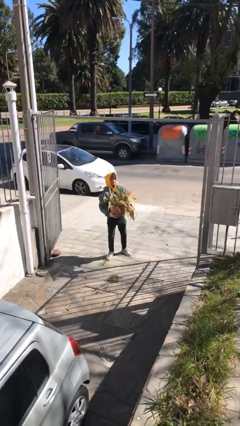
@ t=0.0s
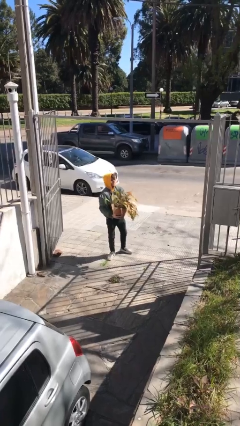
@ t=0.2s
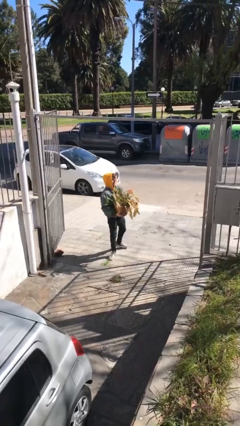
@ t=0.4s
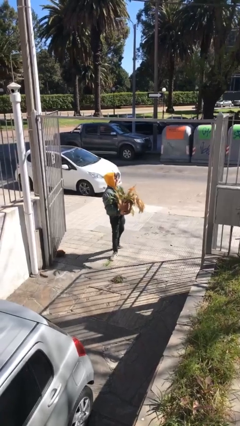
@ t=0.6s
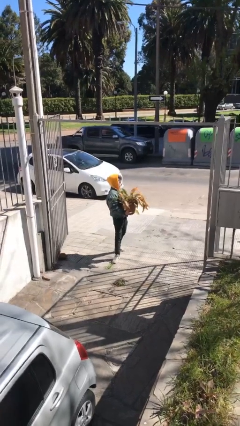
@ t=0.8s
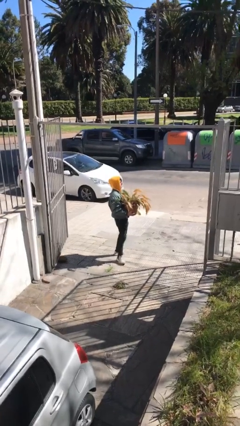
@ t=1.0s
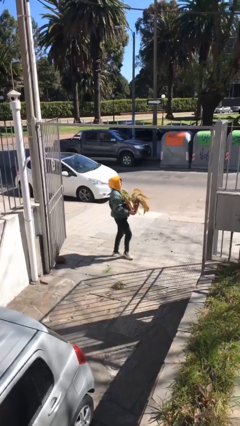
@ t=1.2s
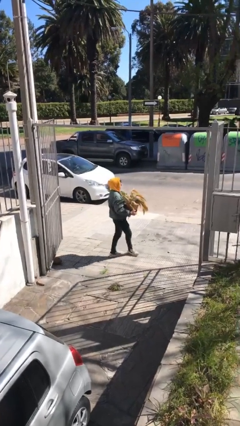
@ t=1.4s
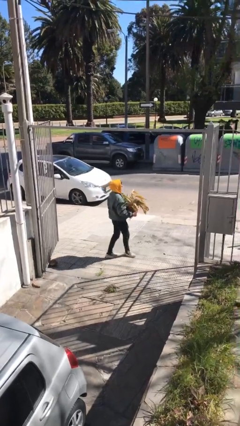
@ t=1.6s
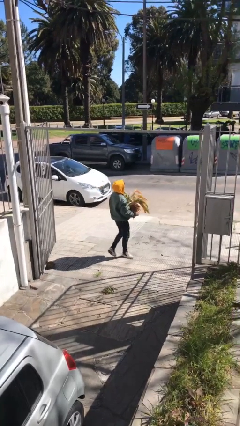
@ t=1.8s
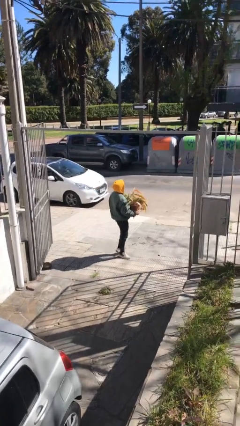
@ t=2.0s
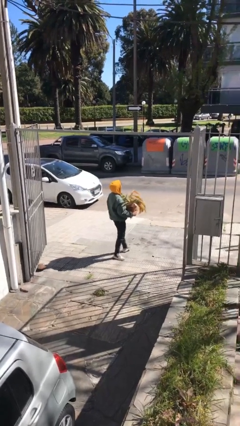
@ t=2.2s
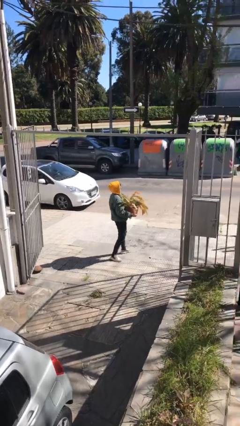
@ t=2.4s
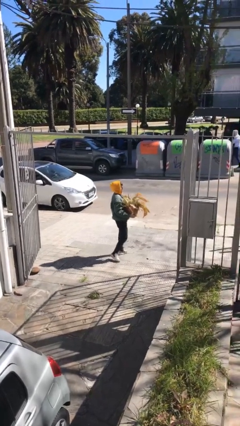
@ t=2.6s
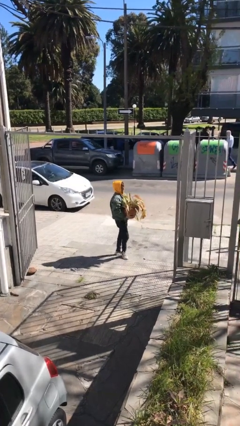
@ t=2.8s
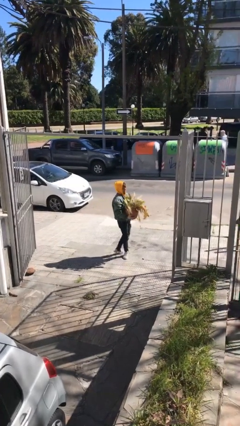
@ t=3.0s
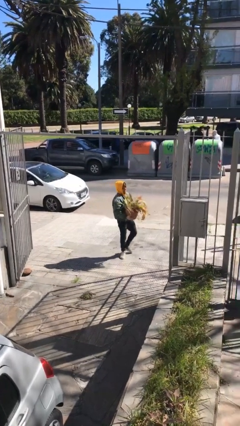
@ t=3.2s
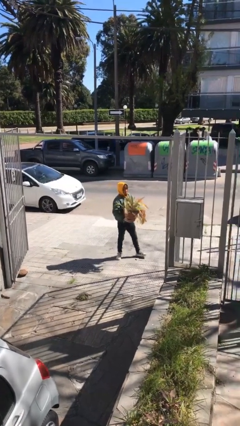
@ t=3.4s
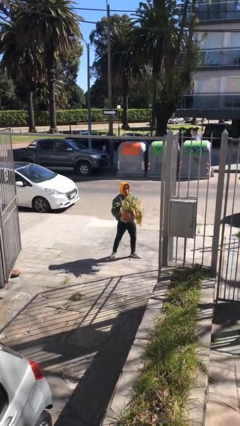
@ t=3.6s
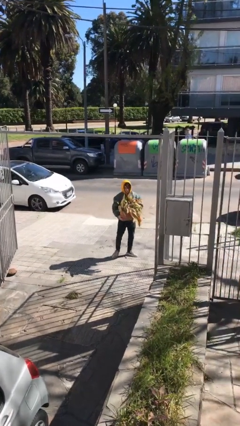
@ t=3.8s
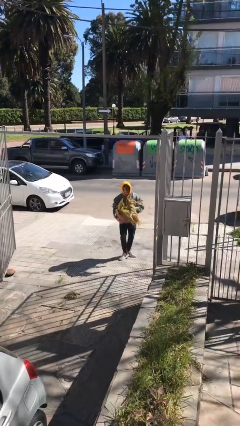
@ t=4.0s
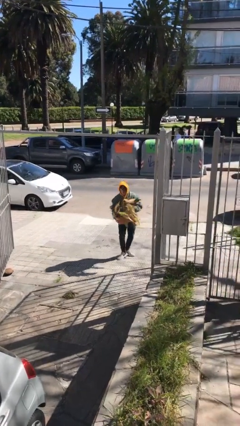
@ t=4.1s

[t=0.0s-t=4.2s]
person carries heavy object

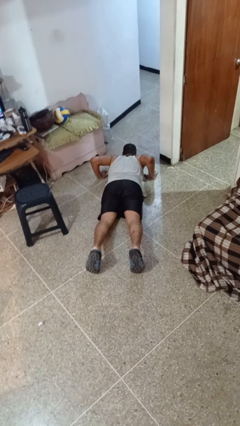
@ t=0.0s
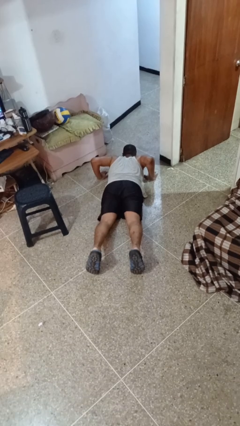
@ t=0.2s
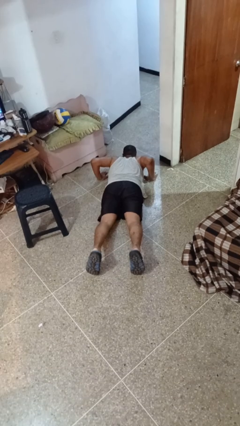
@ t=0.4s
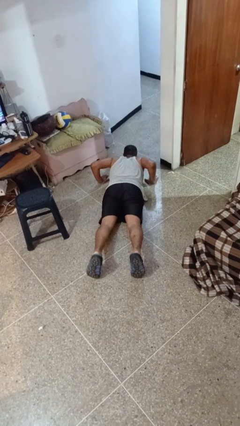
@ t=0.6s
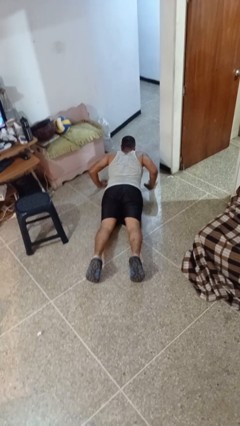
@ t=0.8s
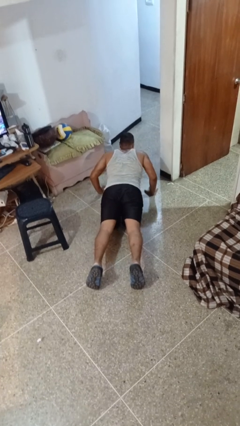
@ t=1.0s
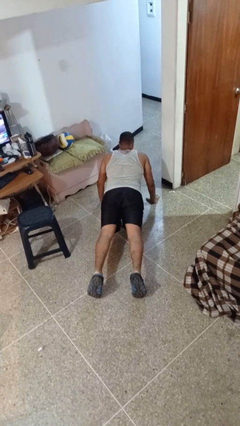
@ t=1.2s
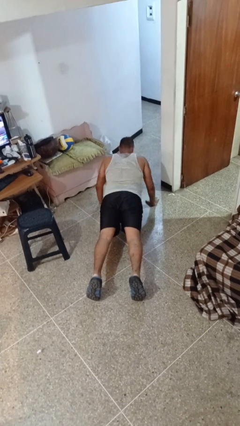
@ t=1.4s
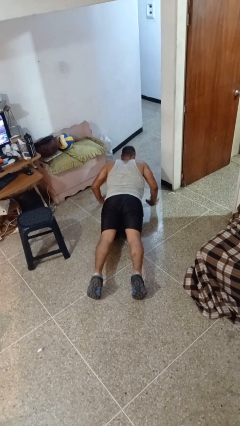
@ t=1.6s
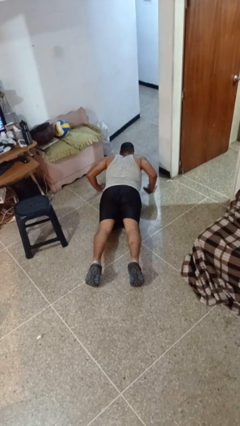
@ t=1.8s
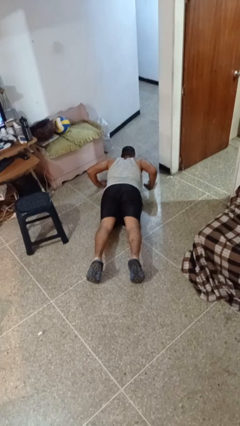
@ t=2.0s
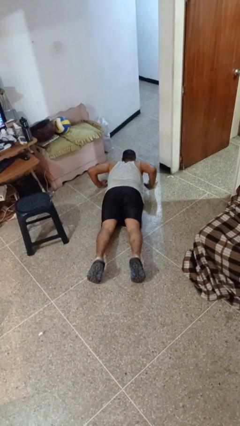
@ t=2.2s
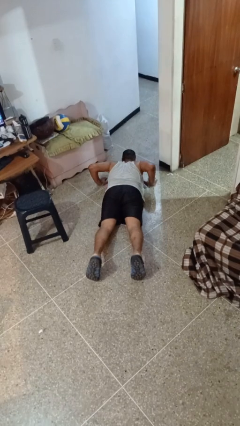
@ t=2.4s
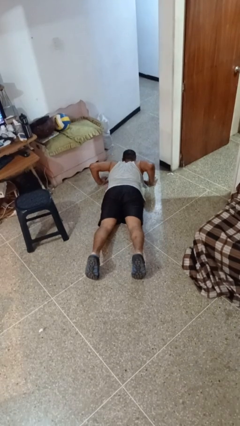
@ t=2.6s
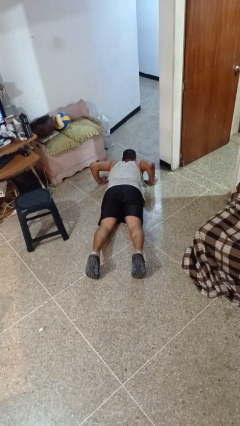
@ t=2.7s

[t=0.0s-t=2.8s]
person exercises with pushup

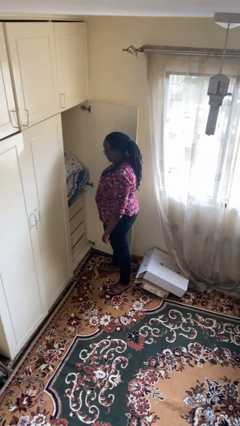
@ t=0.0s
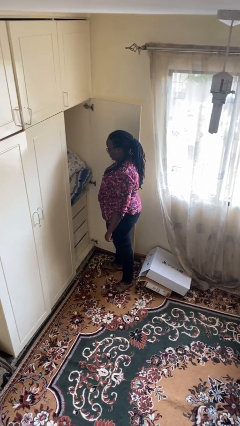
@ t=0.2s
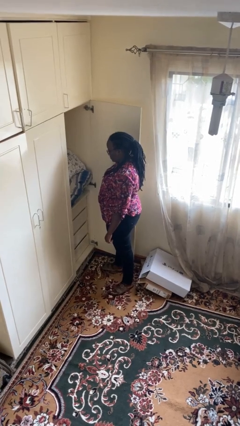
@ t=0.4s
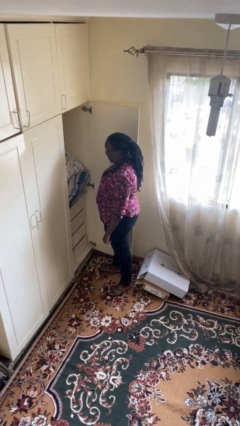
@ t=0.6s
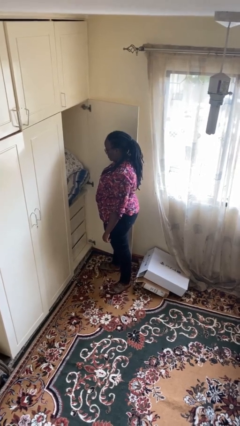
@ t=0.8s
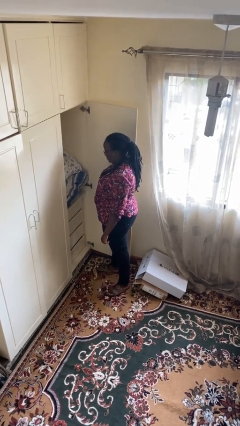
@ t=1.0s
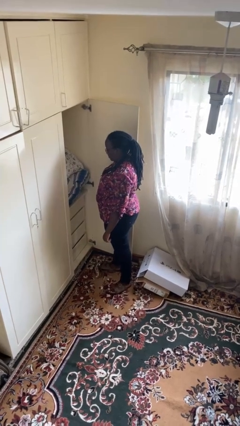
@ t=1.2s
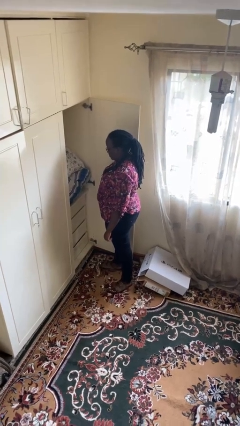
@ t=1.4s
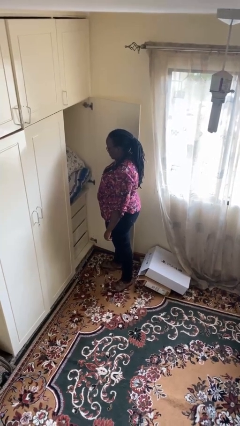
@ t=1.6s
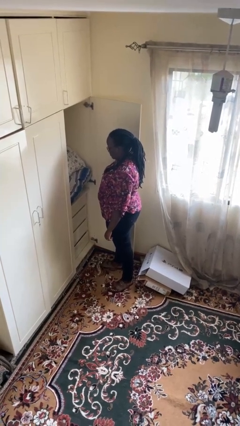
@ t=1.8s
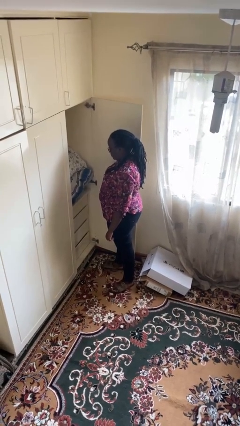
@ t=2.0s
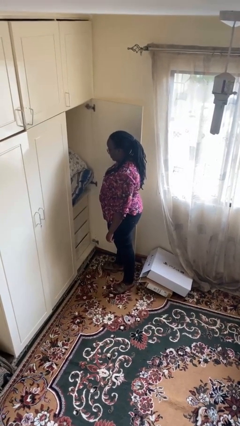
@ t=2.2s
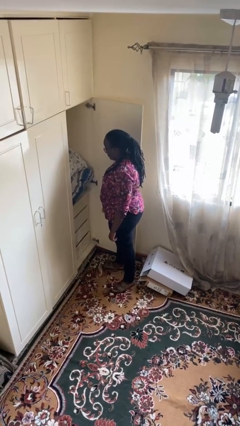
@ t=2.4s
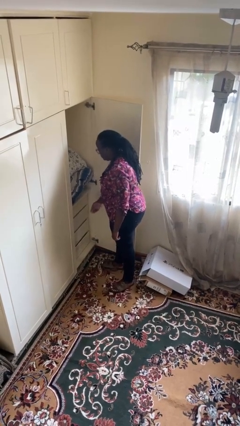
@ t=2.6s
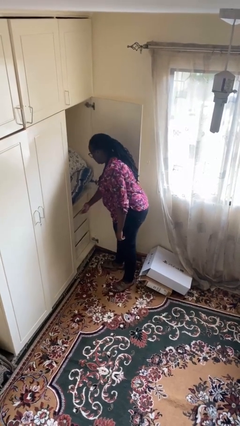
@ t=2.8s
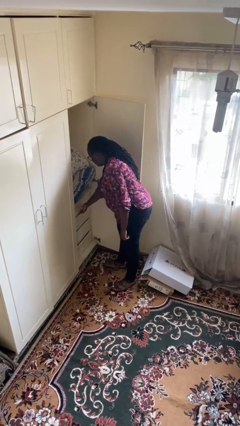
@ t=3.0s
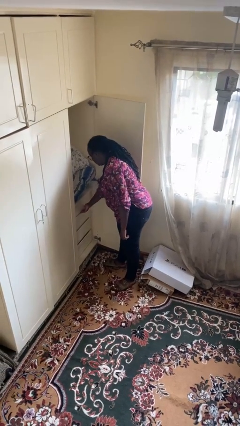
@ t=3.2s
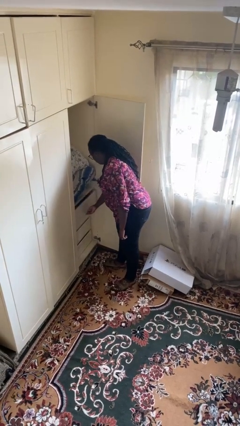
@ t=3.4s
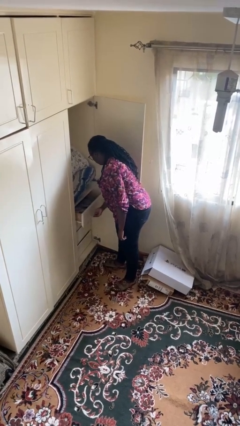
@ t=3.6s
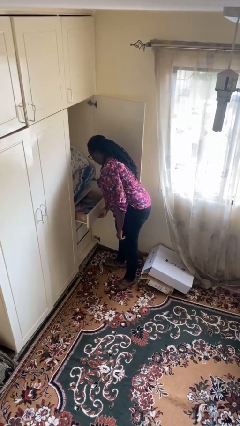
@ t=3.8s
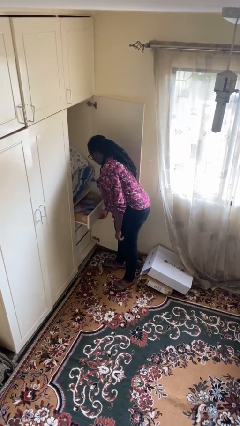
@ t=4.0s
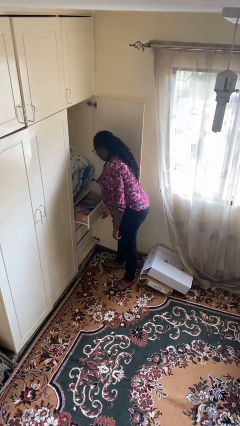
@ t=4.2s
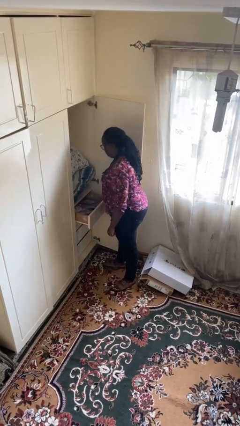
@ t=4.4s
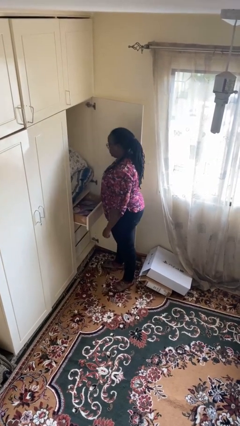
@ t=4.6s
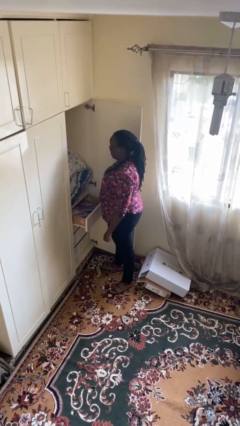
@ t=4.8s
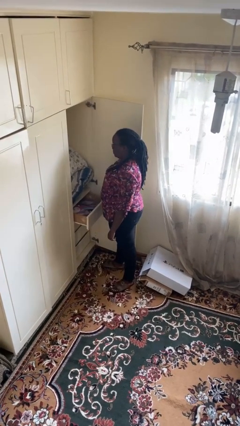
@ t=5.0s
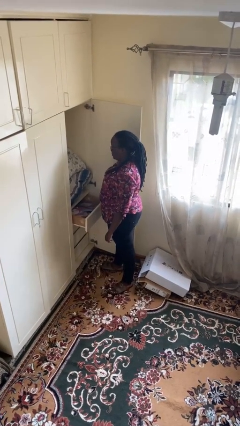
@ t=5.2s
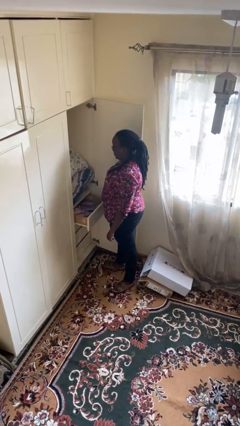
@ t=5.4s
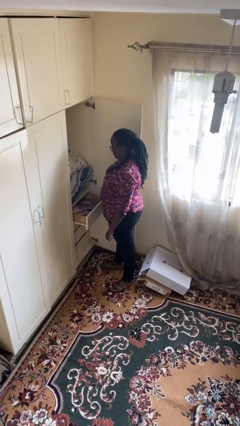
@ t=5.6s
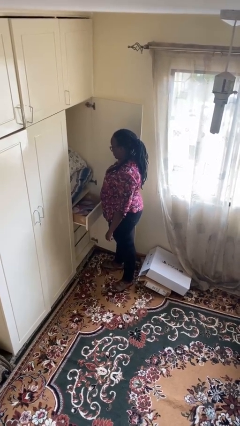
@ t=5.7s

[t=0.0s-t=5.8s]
person opens dresser drawer

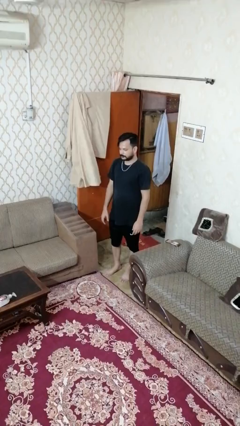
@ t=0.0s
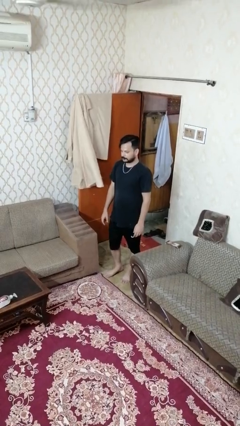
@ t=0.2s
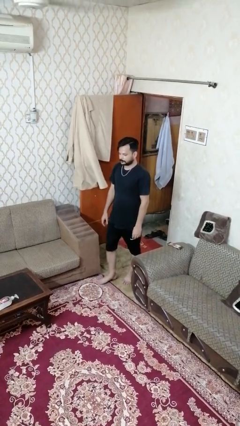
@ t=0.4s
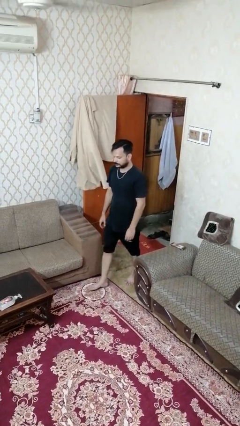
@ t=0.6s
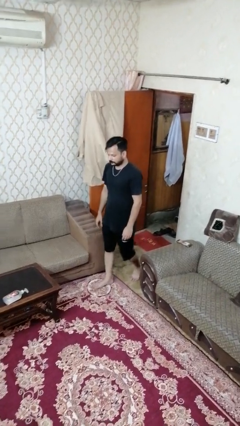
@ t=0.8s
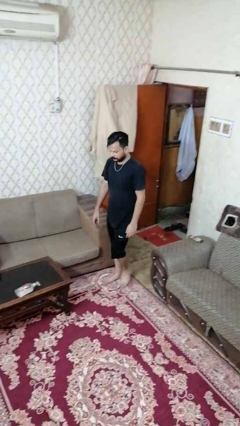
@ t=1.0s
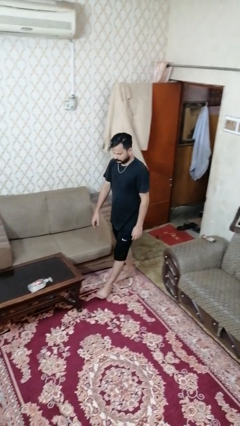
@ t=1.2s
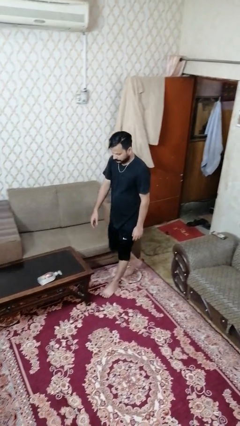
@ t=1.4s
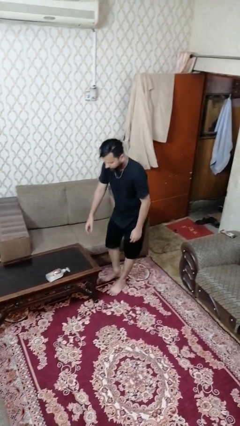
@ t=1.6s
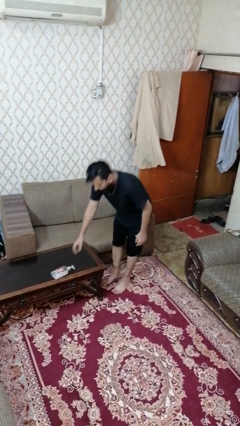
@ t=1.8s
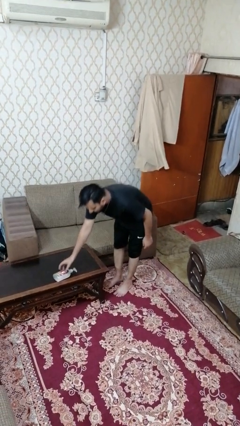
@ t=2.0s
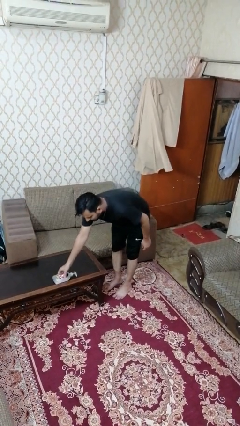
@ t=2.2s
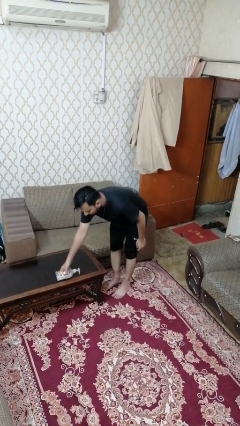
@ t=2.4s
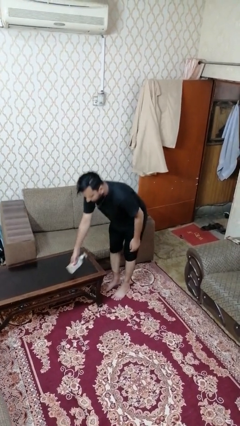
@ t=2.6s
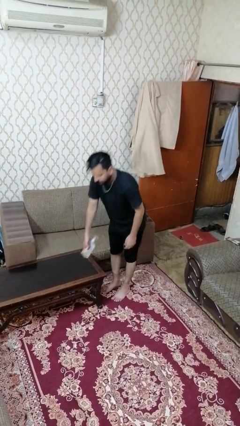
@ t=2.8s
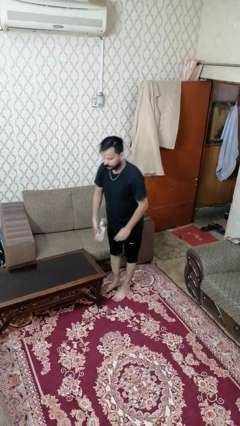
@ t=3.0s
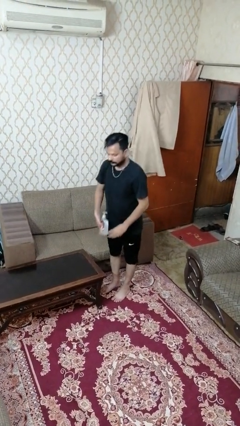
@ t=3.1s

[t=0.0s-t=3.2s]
person picks up object from table

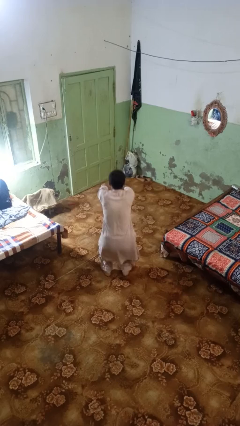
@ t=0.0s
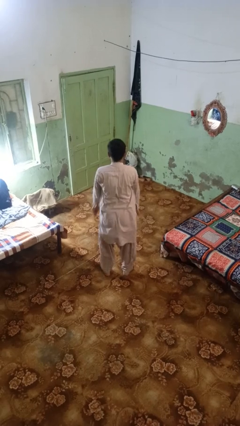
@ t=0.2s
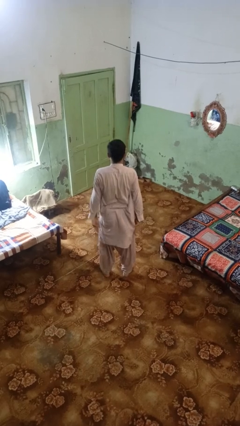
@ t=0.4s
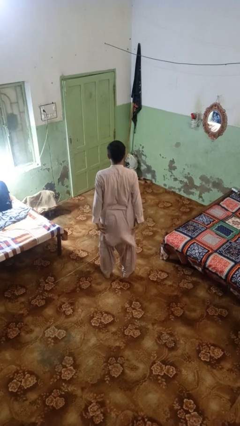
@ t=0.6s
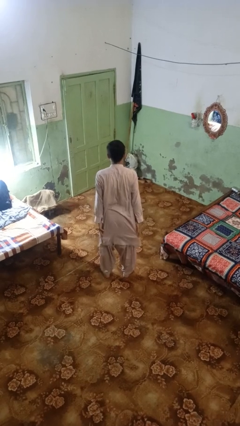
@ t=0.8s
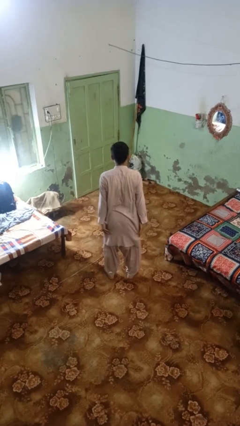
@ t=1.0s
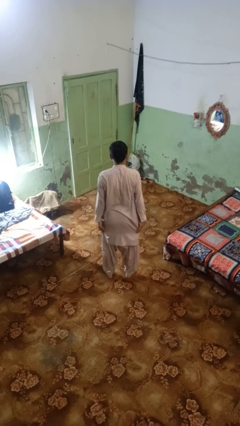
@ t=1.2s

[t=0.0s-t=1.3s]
person stands up

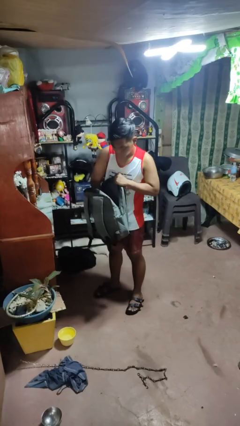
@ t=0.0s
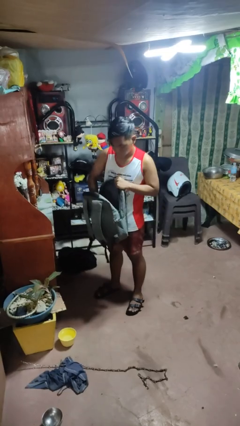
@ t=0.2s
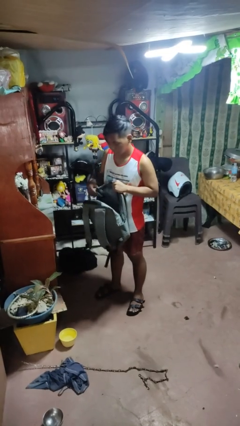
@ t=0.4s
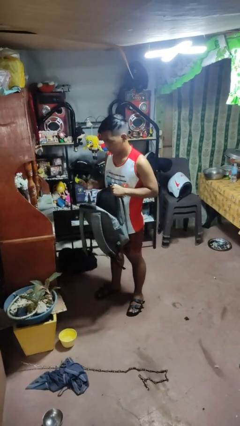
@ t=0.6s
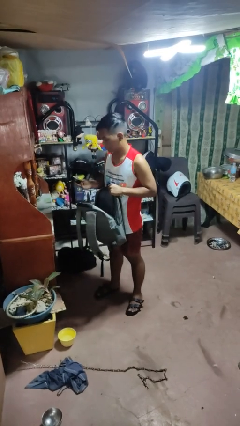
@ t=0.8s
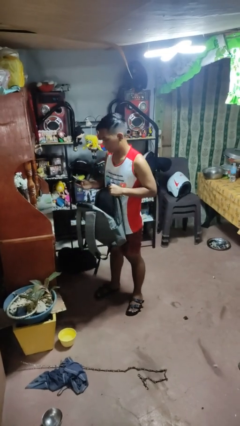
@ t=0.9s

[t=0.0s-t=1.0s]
person takes object from bag
